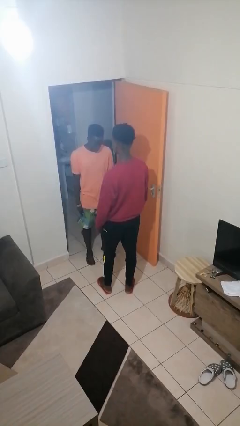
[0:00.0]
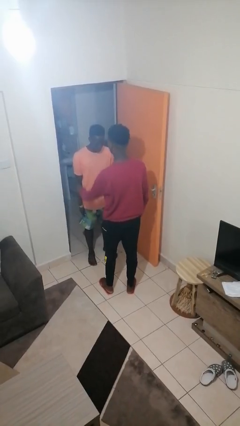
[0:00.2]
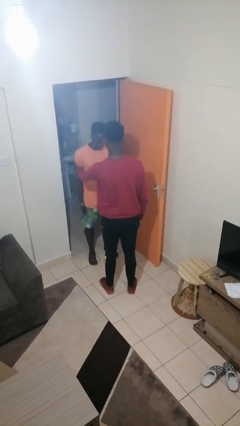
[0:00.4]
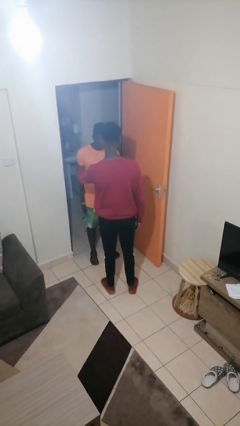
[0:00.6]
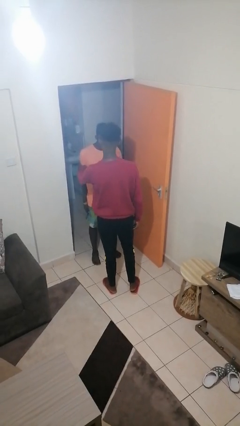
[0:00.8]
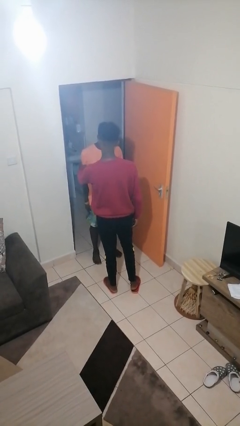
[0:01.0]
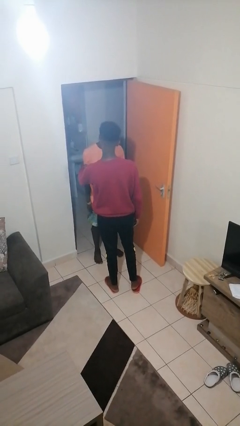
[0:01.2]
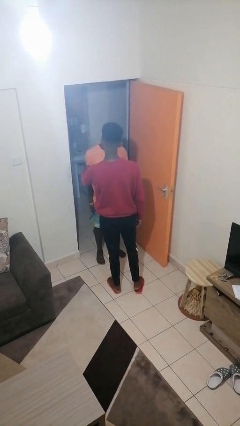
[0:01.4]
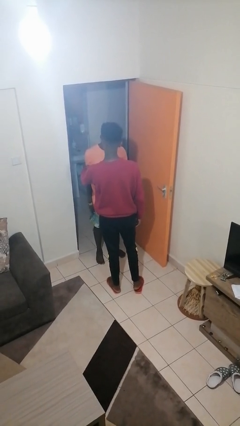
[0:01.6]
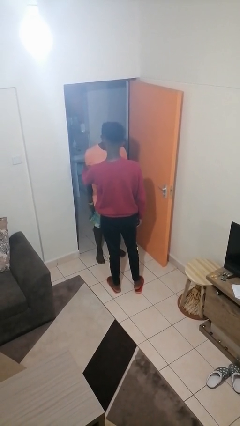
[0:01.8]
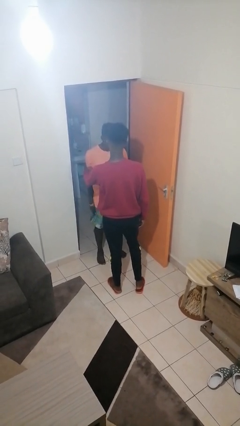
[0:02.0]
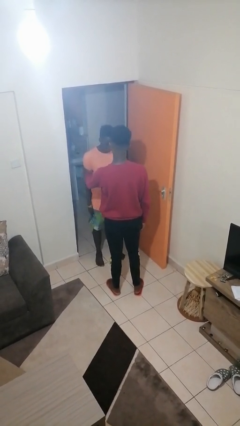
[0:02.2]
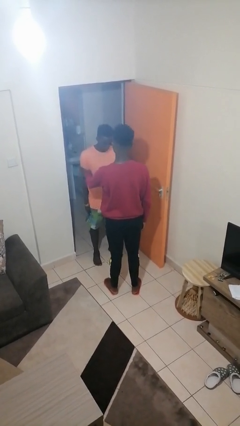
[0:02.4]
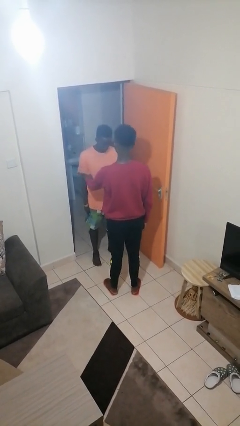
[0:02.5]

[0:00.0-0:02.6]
person grabs person by bicep

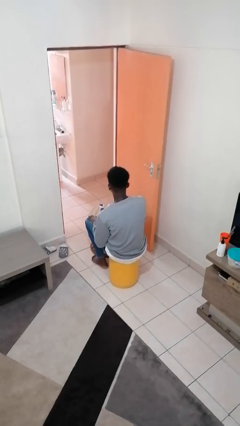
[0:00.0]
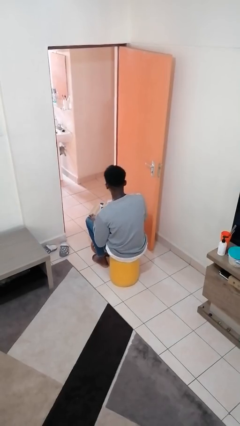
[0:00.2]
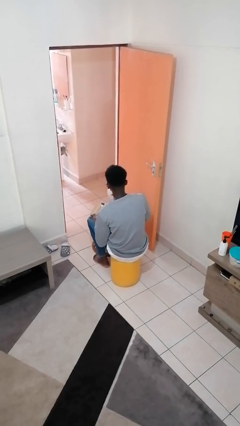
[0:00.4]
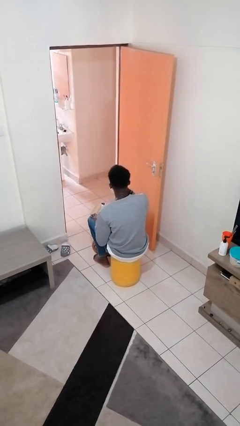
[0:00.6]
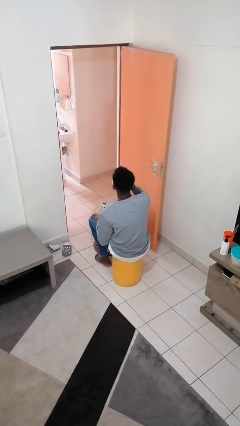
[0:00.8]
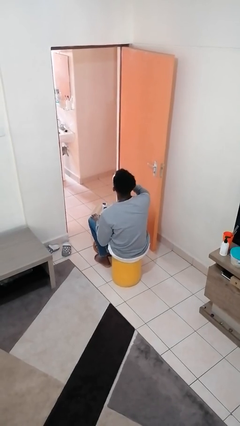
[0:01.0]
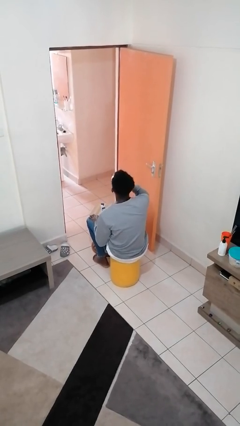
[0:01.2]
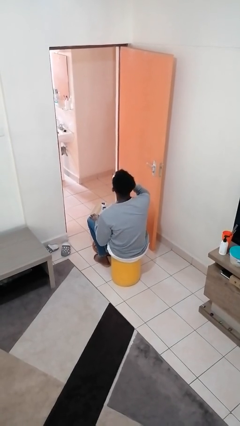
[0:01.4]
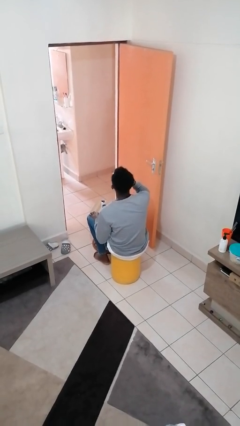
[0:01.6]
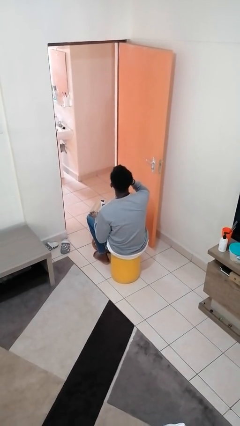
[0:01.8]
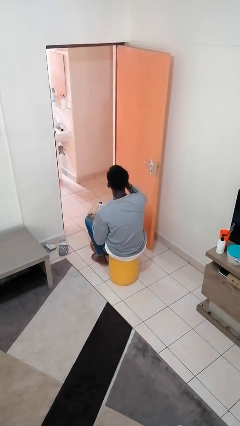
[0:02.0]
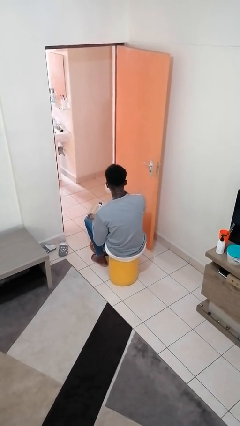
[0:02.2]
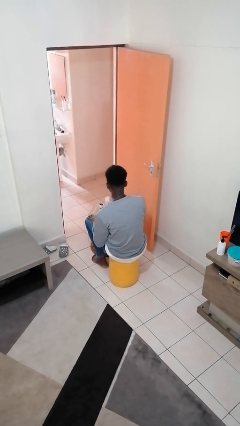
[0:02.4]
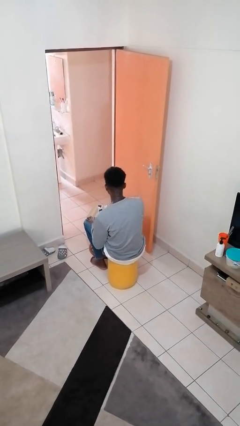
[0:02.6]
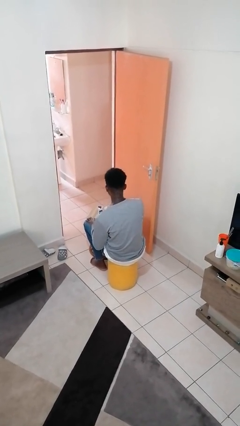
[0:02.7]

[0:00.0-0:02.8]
person drinks from cup

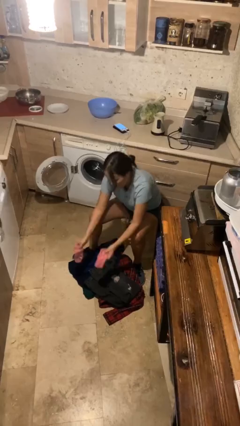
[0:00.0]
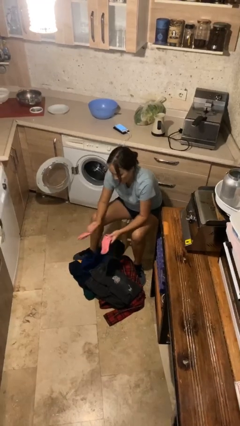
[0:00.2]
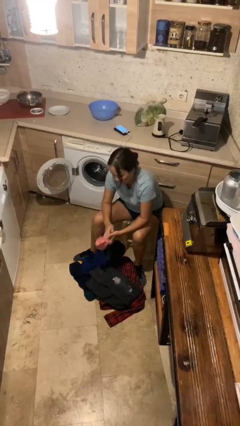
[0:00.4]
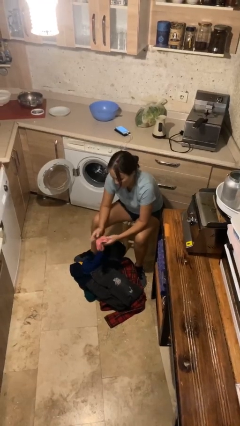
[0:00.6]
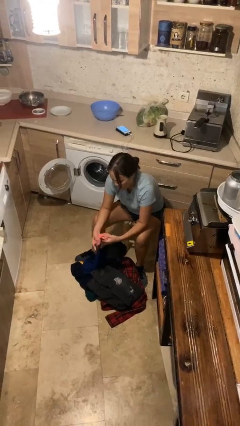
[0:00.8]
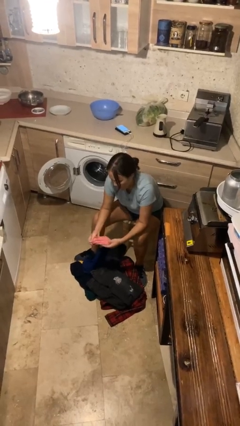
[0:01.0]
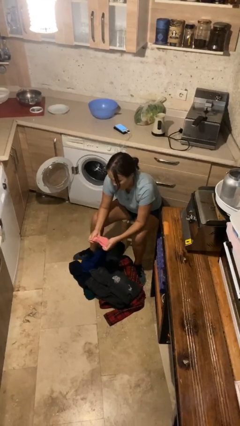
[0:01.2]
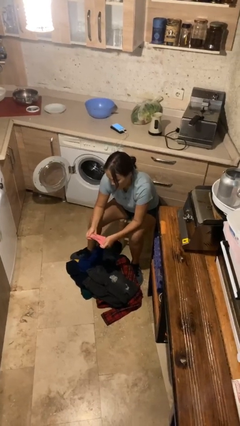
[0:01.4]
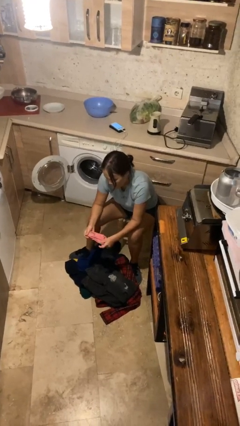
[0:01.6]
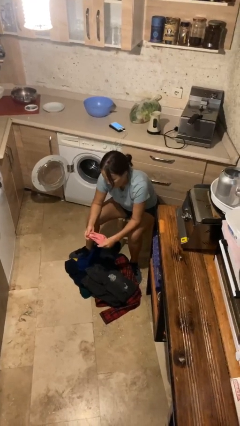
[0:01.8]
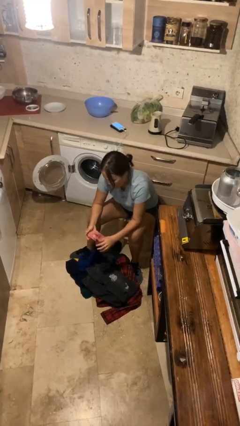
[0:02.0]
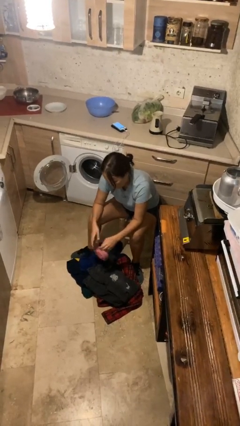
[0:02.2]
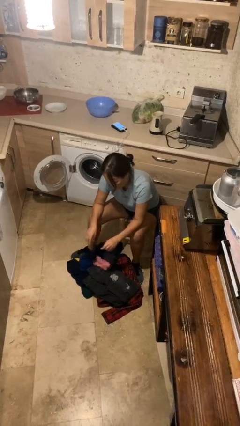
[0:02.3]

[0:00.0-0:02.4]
person folds socks

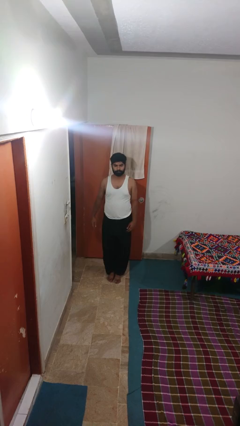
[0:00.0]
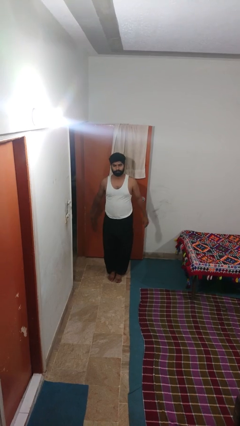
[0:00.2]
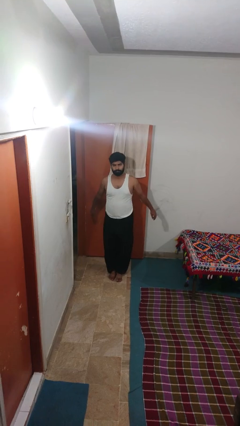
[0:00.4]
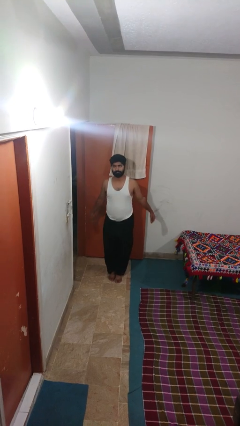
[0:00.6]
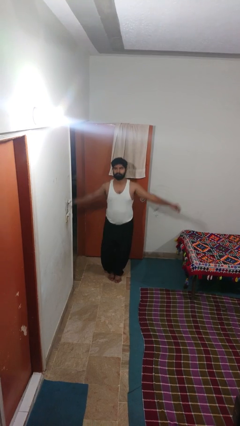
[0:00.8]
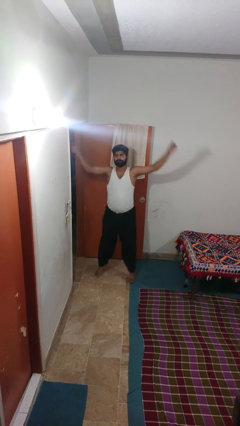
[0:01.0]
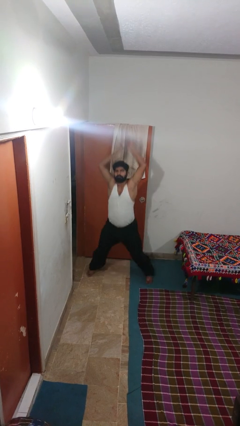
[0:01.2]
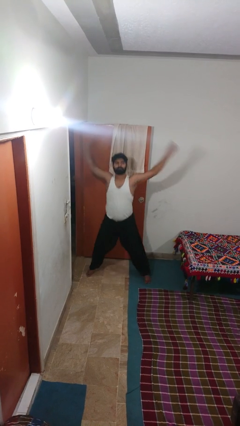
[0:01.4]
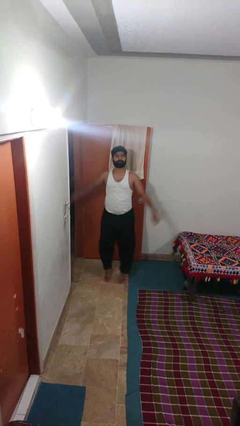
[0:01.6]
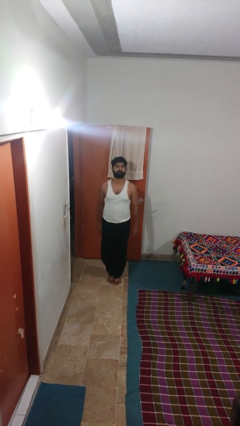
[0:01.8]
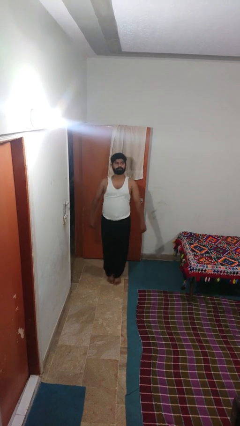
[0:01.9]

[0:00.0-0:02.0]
person exercises with jumping jacks

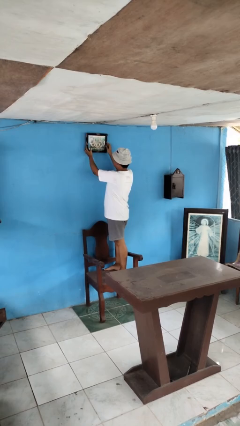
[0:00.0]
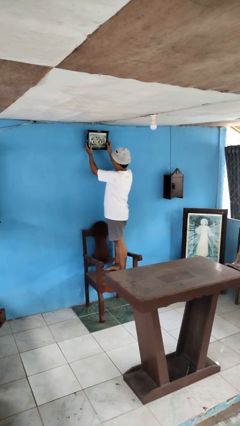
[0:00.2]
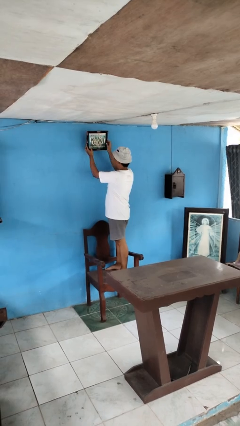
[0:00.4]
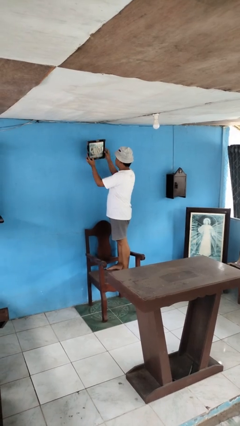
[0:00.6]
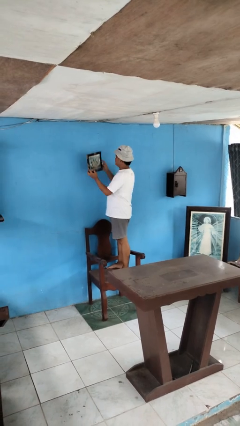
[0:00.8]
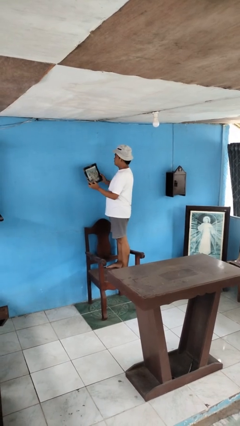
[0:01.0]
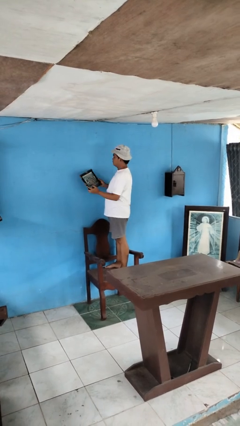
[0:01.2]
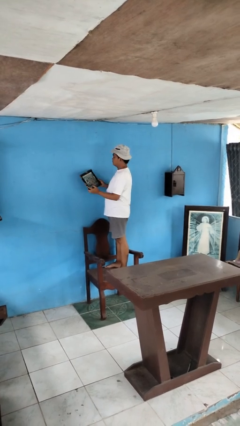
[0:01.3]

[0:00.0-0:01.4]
person takes down picture frame

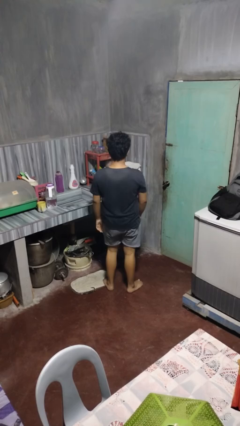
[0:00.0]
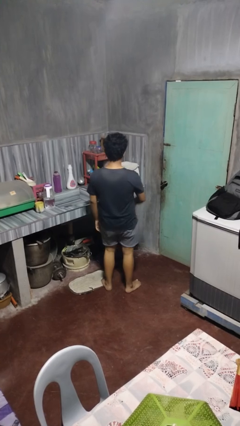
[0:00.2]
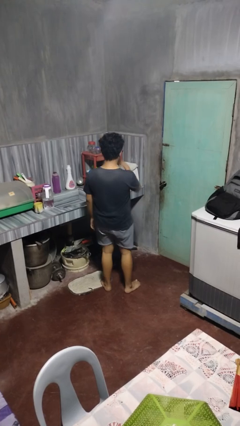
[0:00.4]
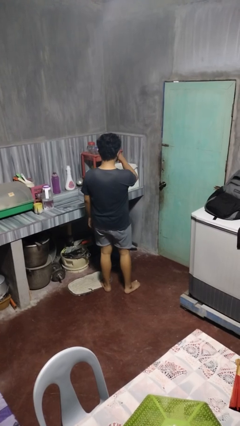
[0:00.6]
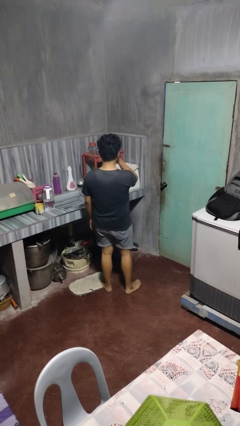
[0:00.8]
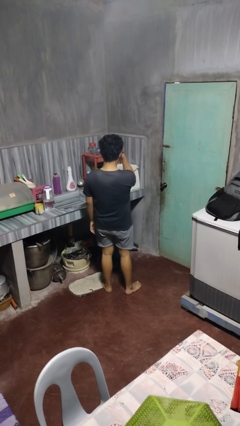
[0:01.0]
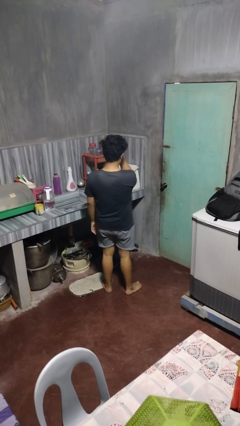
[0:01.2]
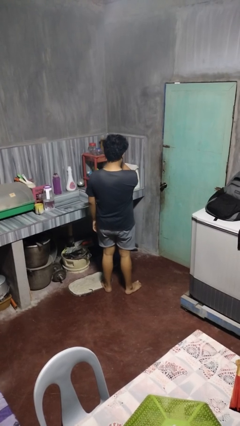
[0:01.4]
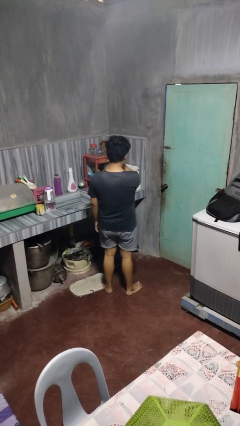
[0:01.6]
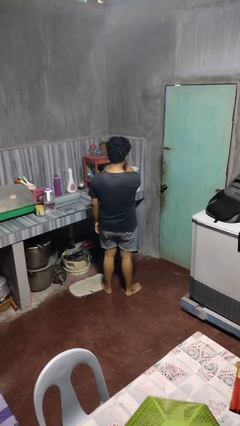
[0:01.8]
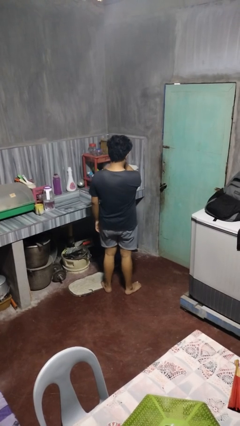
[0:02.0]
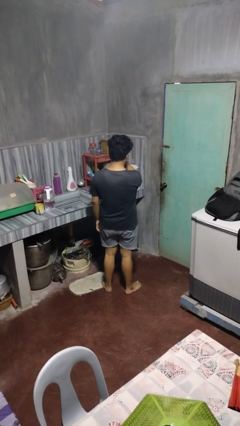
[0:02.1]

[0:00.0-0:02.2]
person rubs eyes

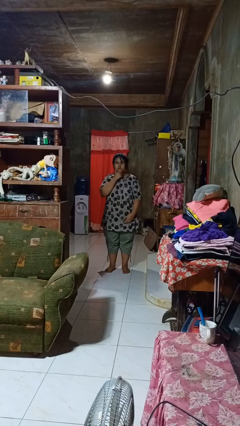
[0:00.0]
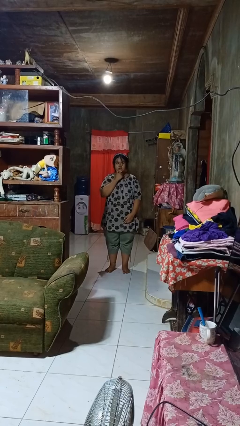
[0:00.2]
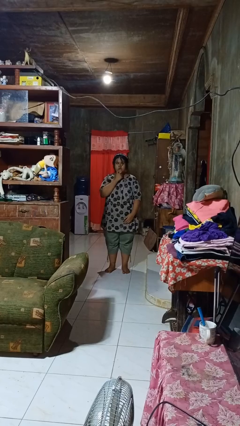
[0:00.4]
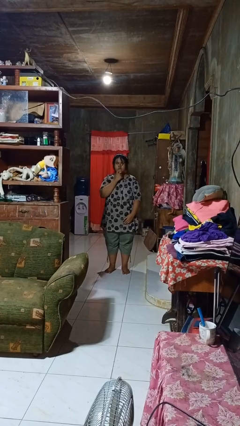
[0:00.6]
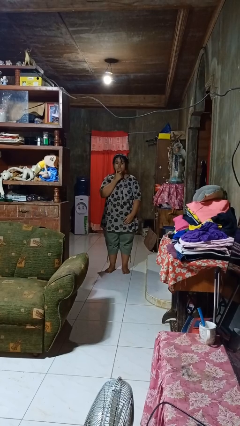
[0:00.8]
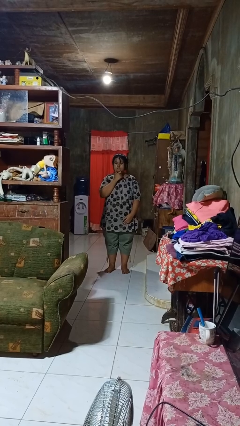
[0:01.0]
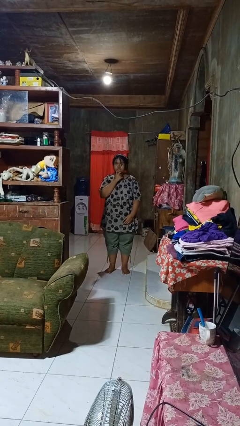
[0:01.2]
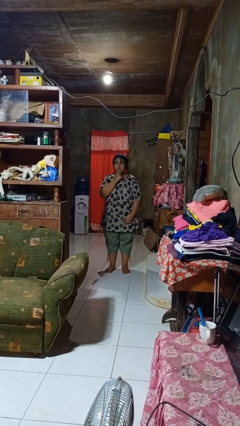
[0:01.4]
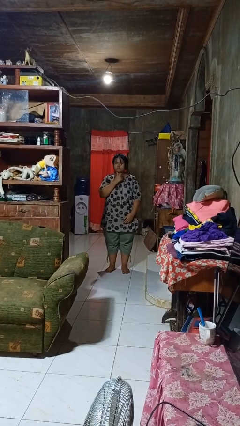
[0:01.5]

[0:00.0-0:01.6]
person strokes chin

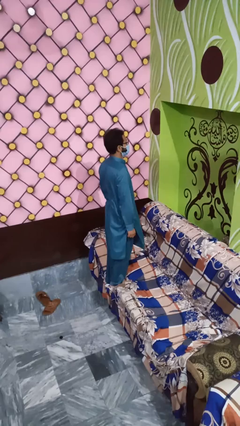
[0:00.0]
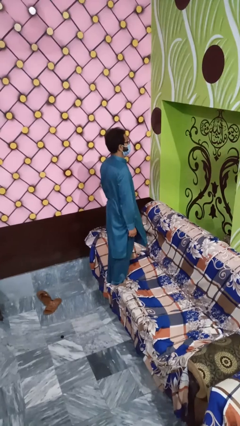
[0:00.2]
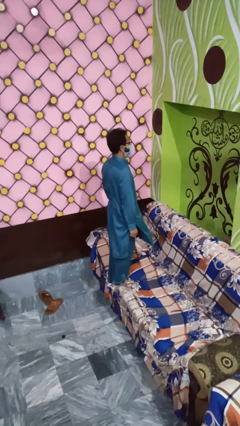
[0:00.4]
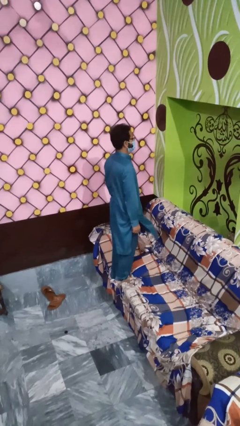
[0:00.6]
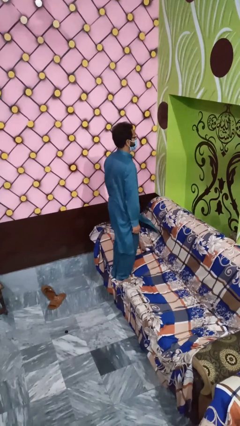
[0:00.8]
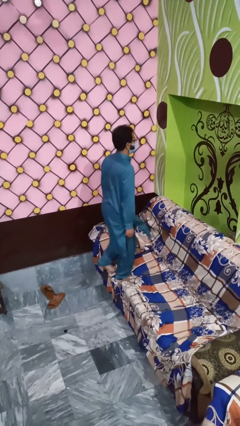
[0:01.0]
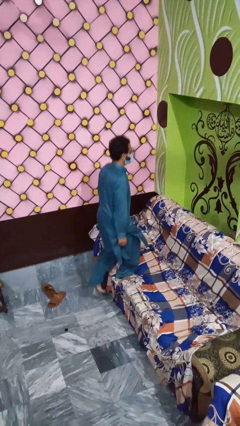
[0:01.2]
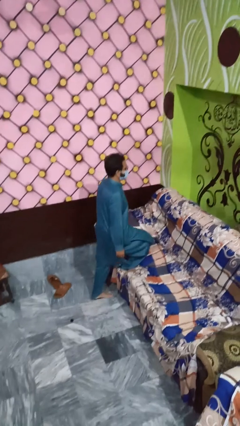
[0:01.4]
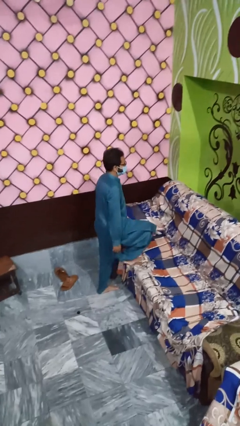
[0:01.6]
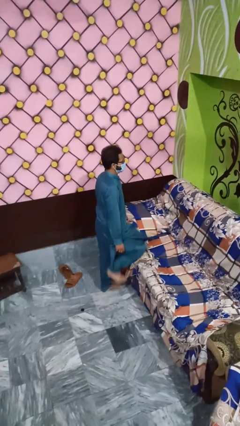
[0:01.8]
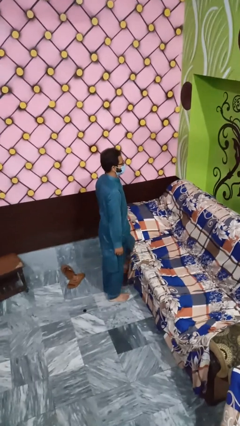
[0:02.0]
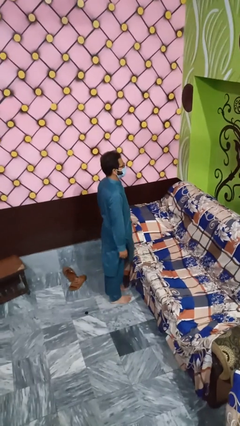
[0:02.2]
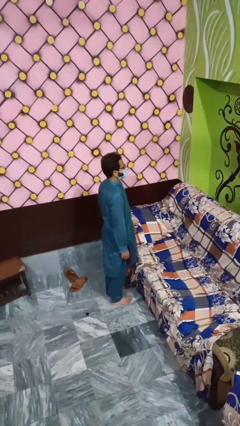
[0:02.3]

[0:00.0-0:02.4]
person climbs off couch
